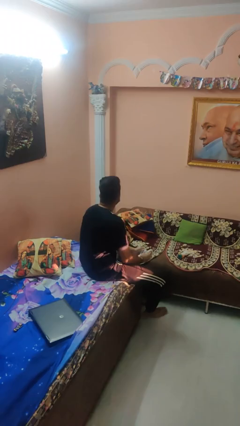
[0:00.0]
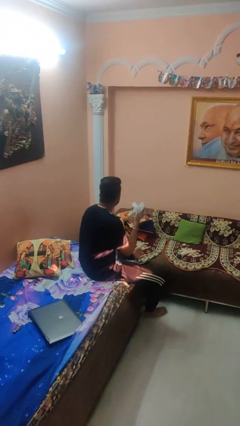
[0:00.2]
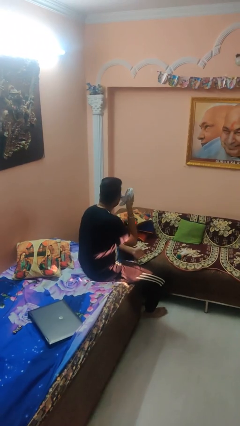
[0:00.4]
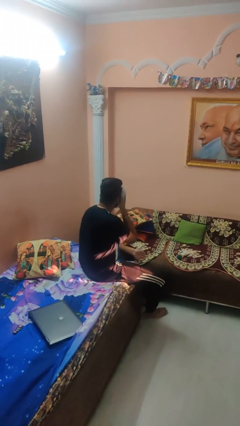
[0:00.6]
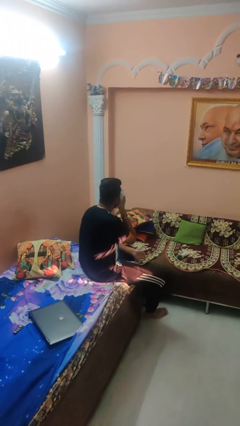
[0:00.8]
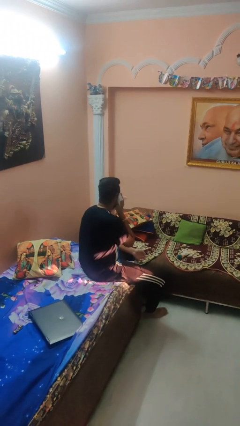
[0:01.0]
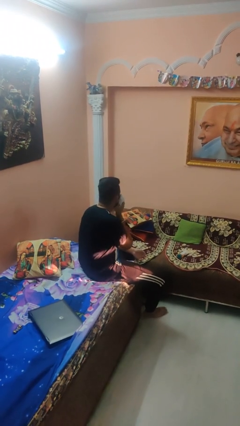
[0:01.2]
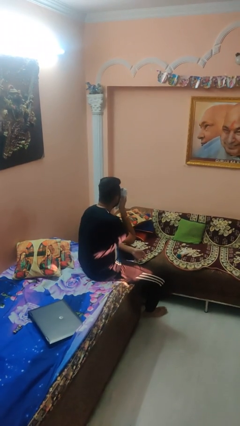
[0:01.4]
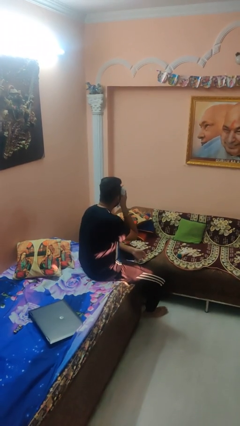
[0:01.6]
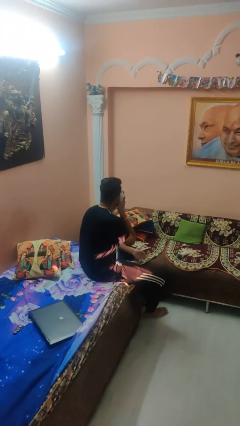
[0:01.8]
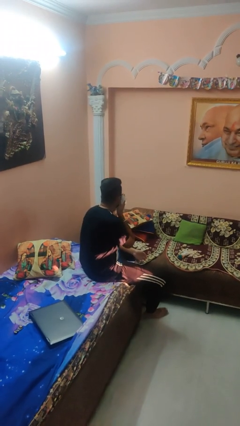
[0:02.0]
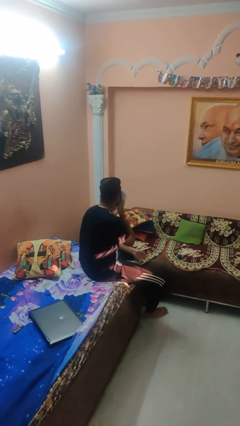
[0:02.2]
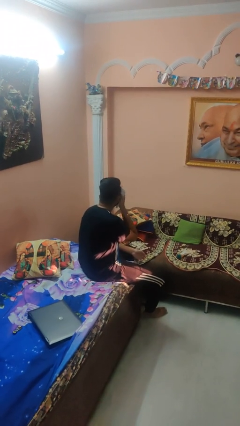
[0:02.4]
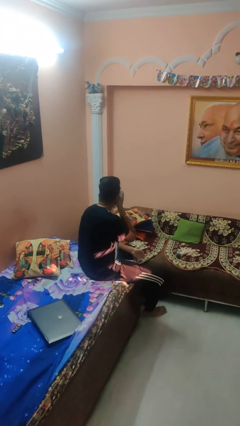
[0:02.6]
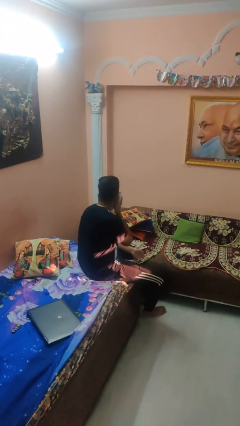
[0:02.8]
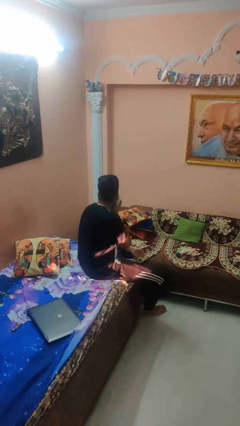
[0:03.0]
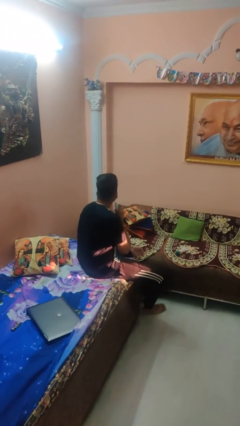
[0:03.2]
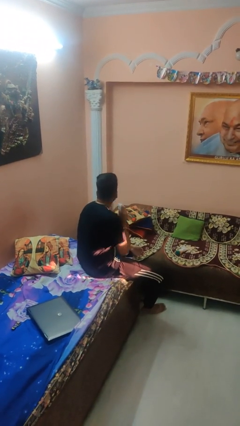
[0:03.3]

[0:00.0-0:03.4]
person wipes mouth with napkin

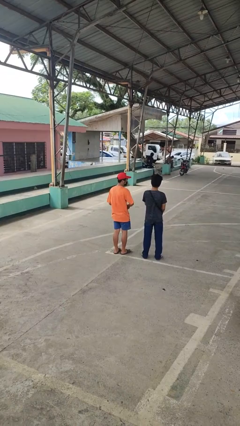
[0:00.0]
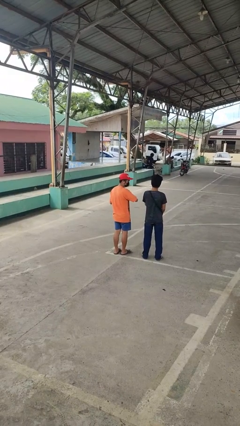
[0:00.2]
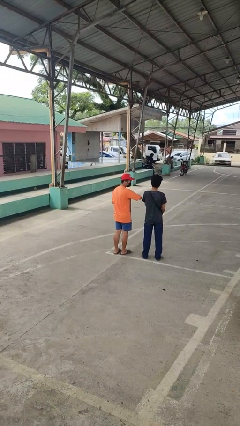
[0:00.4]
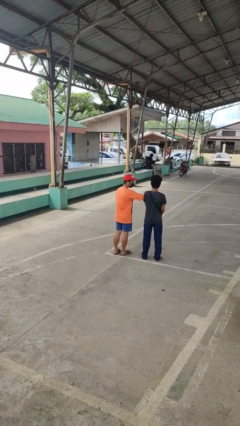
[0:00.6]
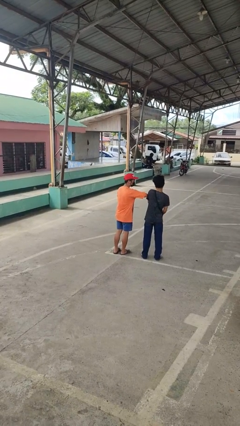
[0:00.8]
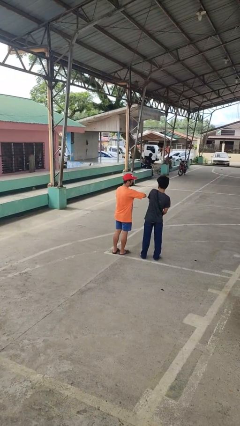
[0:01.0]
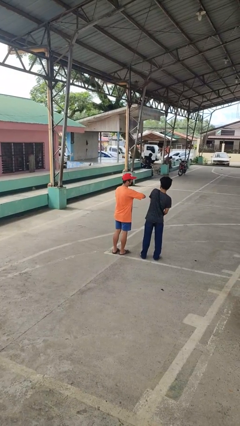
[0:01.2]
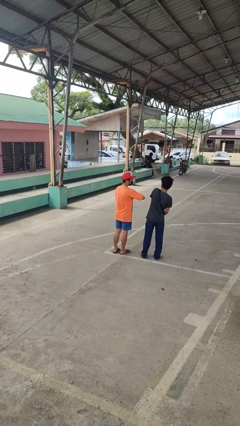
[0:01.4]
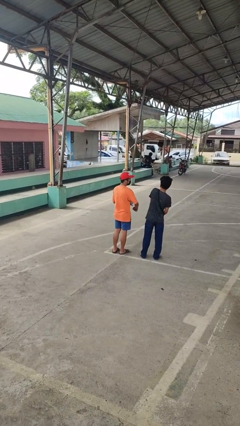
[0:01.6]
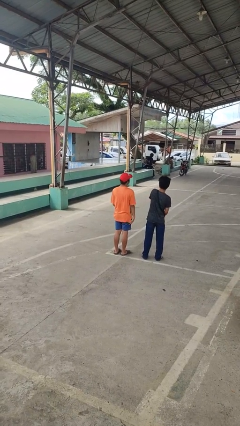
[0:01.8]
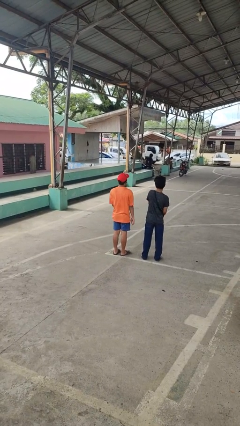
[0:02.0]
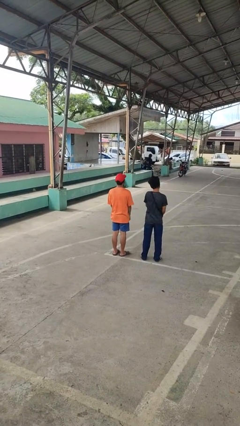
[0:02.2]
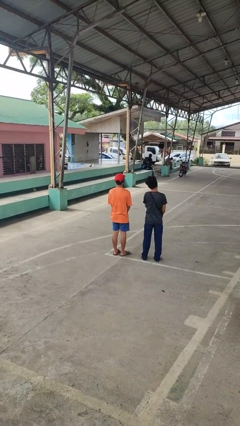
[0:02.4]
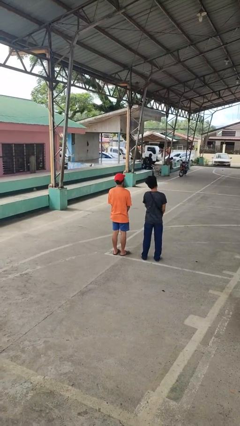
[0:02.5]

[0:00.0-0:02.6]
person nudges person with elbow

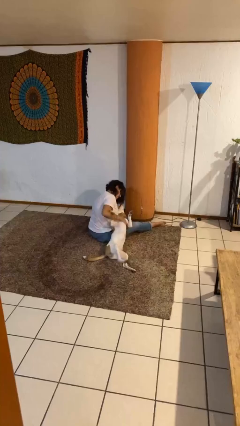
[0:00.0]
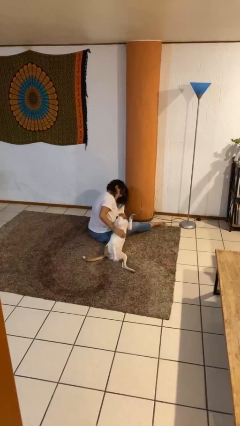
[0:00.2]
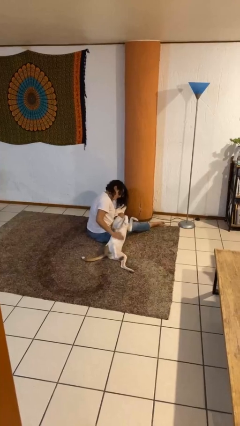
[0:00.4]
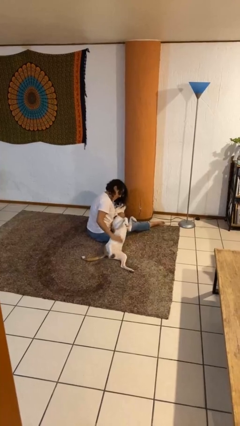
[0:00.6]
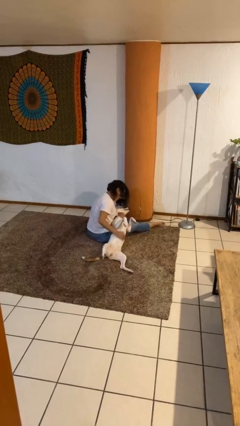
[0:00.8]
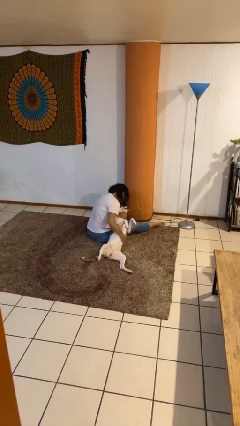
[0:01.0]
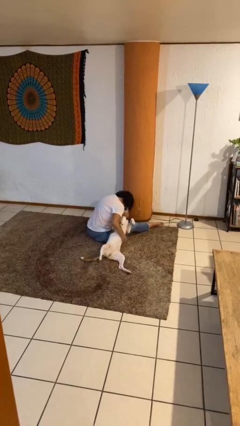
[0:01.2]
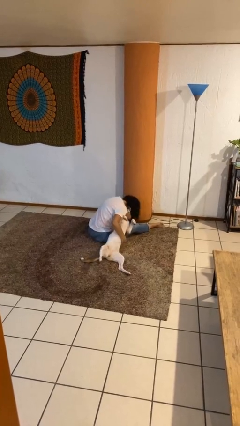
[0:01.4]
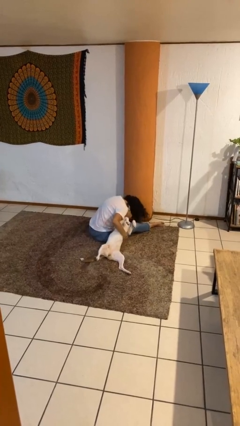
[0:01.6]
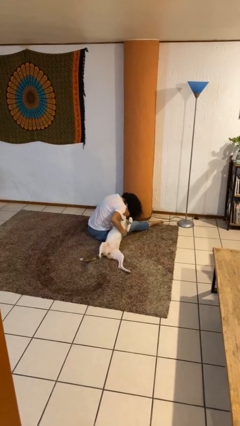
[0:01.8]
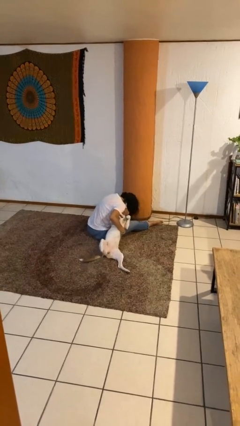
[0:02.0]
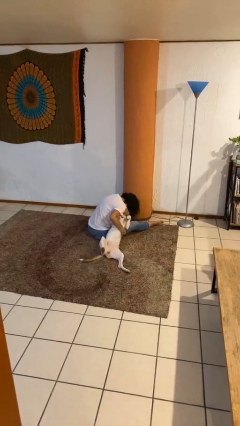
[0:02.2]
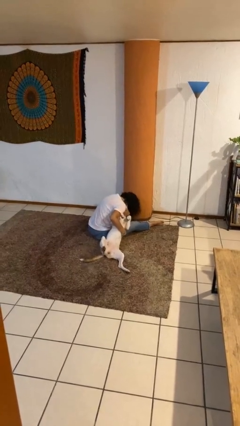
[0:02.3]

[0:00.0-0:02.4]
person hugs dog

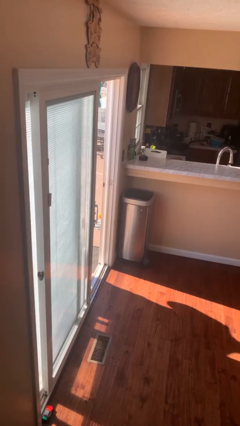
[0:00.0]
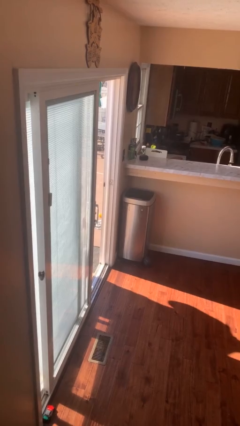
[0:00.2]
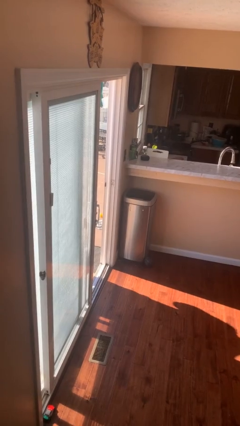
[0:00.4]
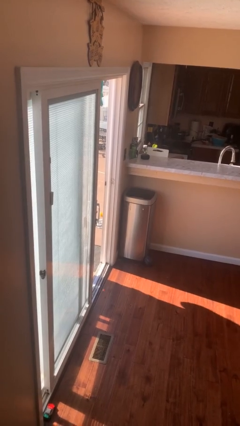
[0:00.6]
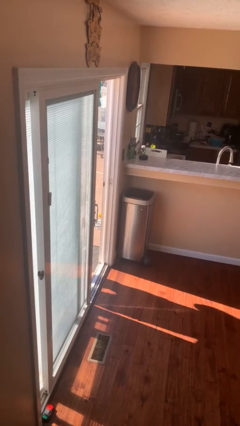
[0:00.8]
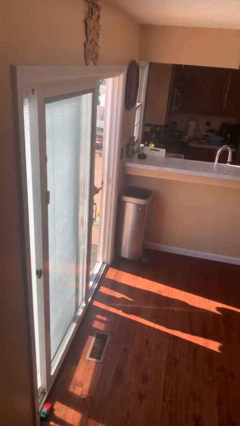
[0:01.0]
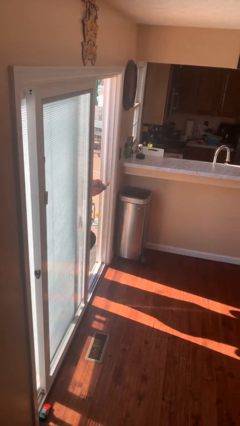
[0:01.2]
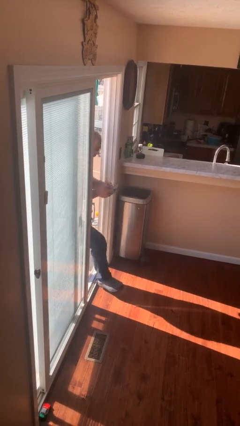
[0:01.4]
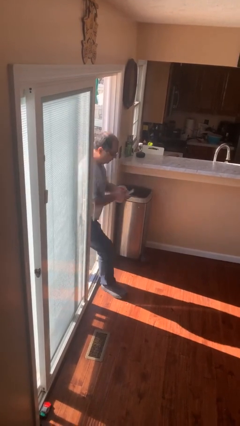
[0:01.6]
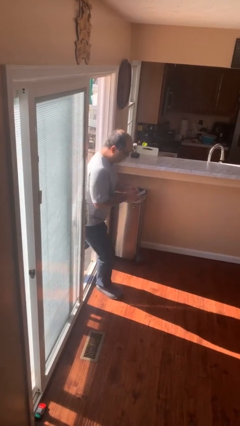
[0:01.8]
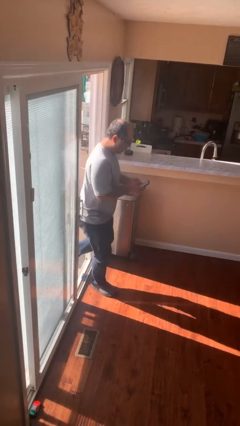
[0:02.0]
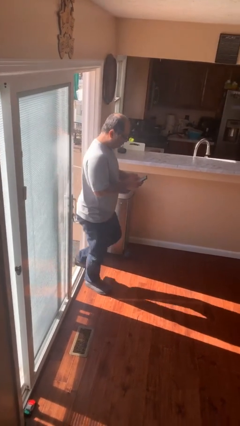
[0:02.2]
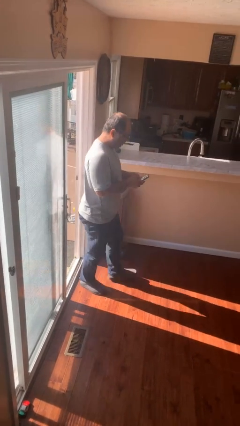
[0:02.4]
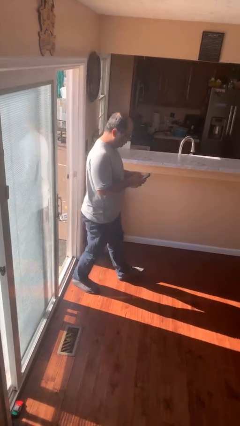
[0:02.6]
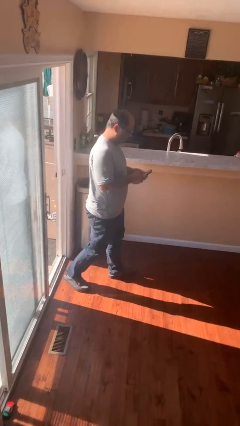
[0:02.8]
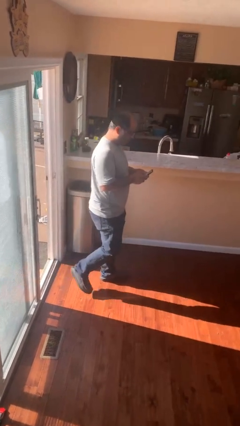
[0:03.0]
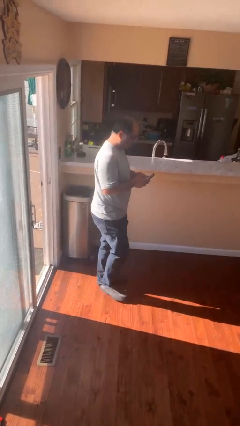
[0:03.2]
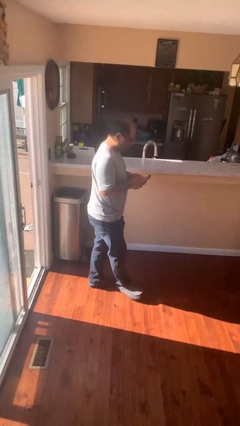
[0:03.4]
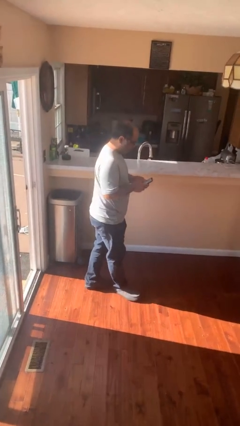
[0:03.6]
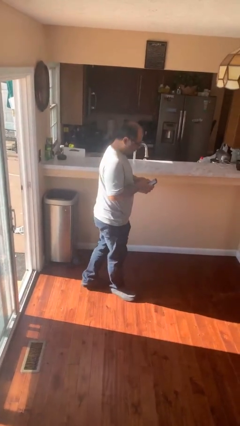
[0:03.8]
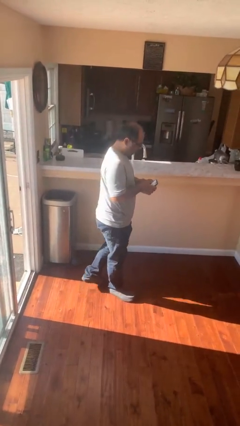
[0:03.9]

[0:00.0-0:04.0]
person enters scene through structure

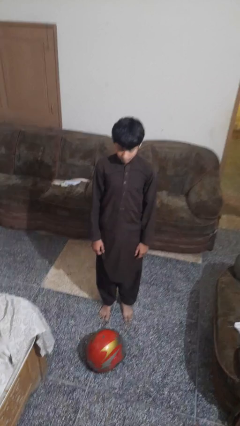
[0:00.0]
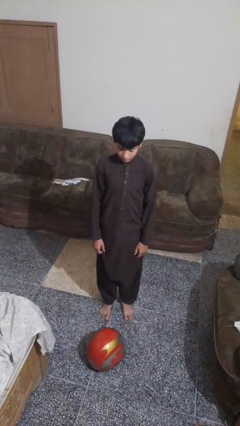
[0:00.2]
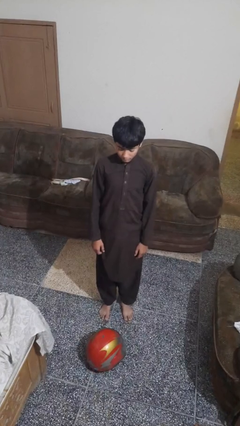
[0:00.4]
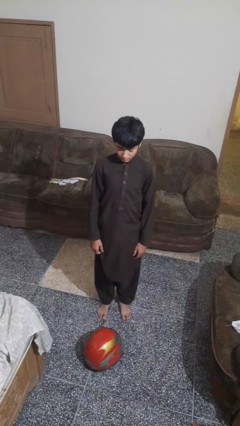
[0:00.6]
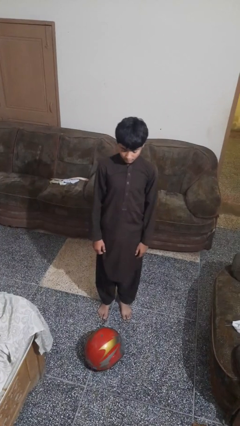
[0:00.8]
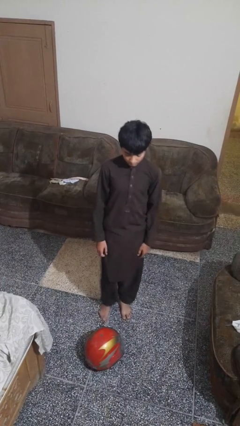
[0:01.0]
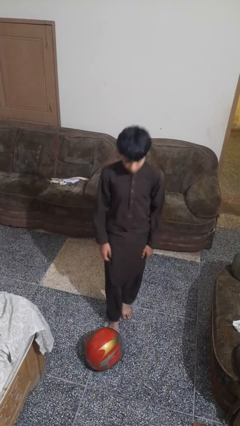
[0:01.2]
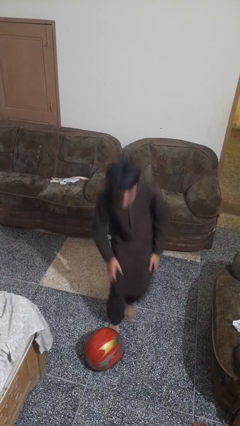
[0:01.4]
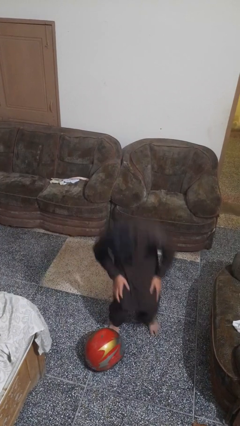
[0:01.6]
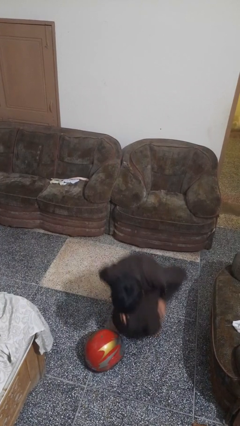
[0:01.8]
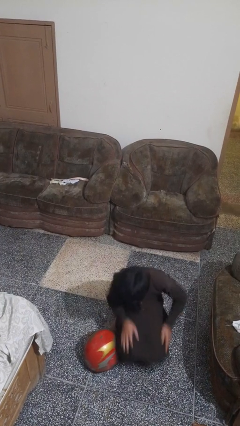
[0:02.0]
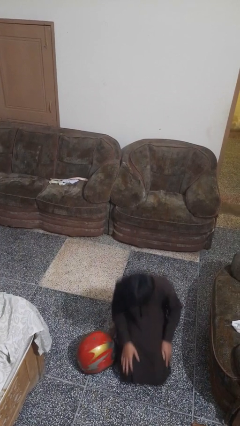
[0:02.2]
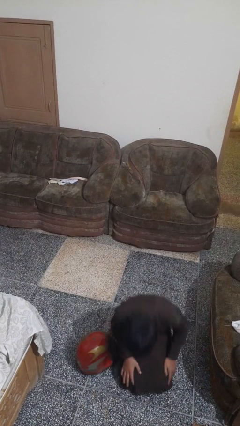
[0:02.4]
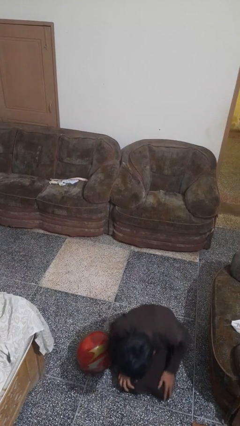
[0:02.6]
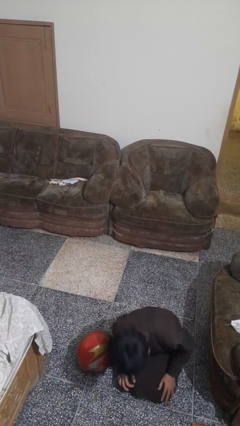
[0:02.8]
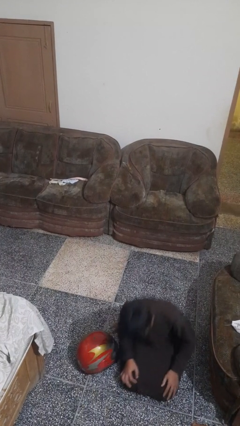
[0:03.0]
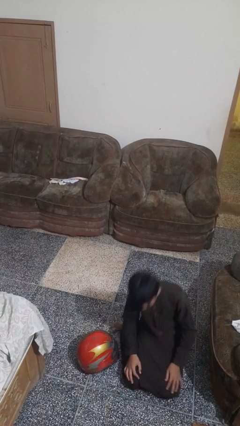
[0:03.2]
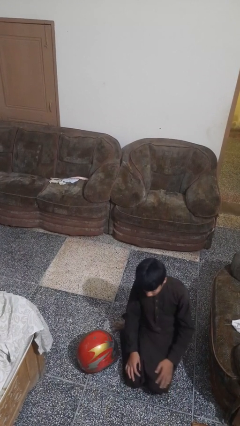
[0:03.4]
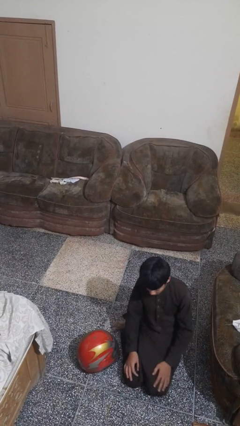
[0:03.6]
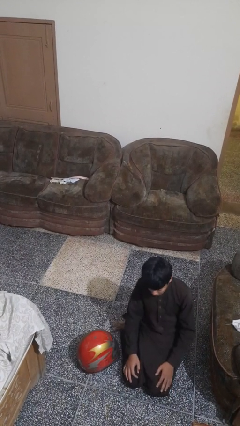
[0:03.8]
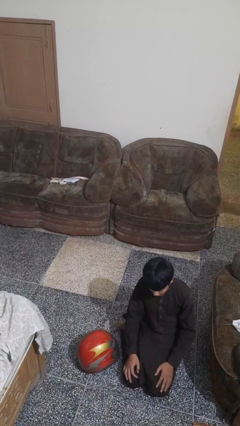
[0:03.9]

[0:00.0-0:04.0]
person trips on object on floor

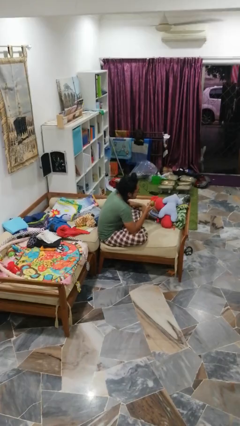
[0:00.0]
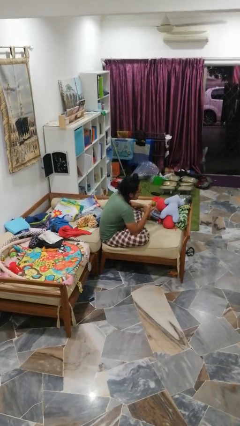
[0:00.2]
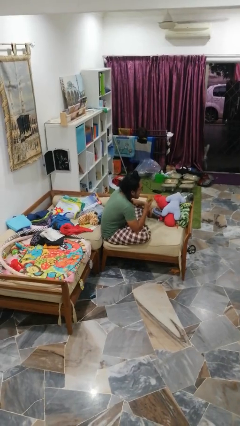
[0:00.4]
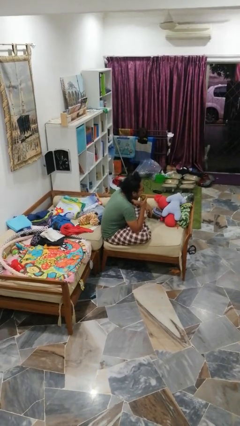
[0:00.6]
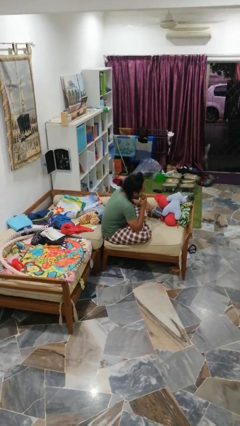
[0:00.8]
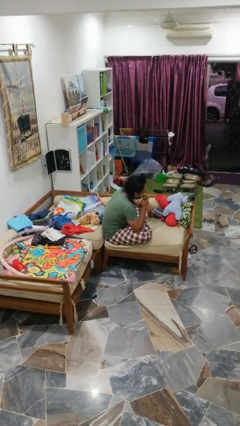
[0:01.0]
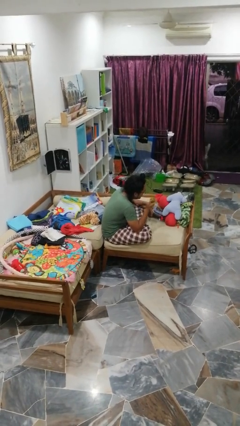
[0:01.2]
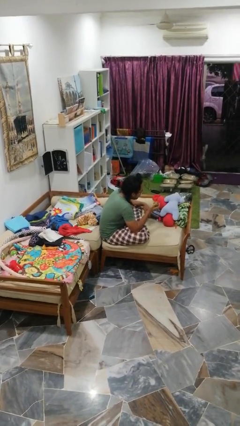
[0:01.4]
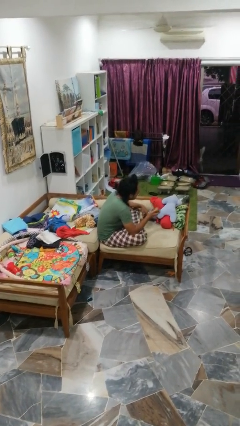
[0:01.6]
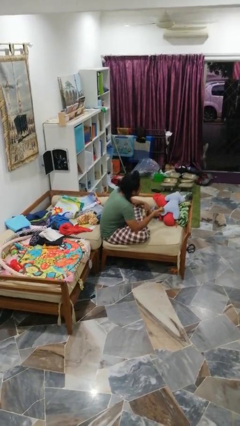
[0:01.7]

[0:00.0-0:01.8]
person eats apple
